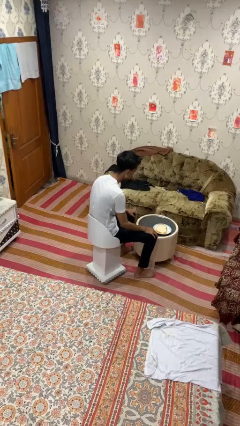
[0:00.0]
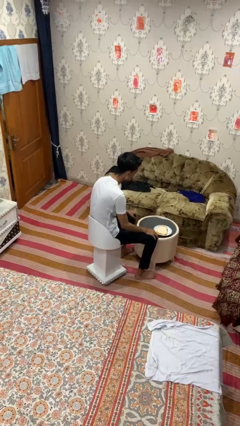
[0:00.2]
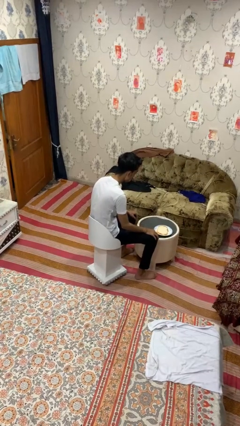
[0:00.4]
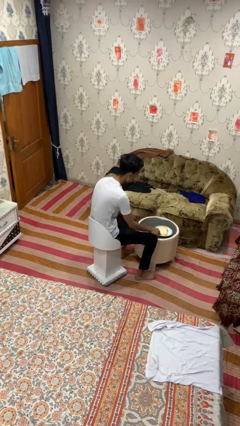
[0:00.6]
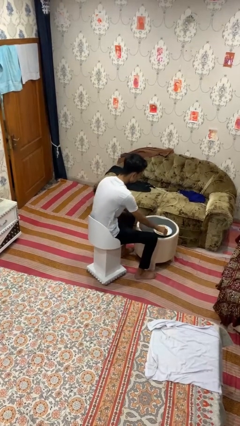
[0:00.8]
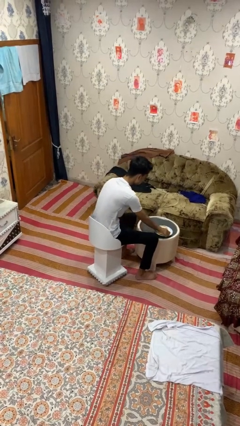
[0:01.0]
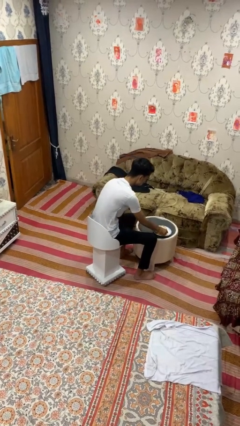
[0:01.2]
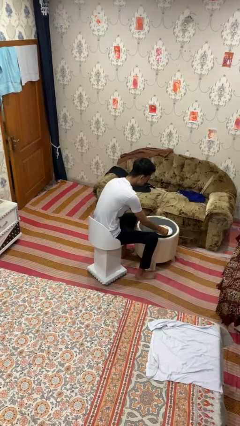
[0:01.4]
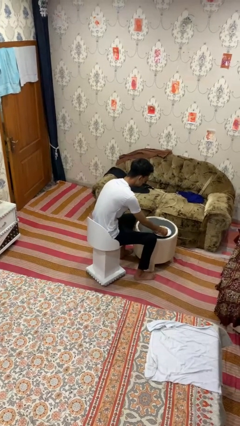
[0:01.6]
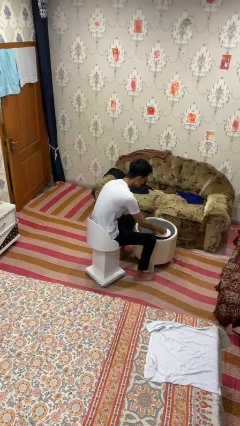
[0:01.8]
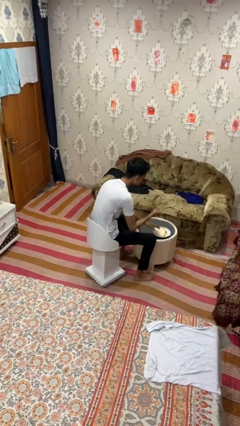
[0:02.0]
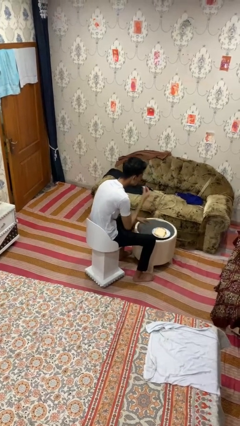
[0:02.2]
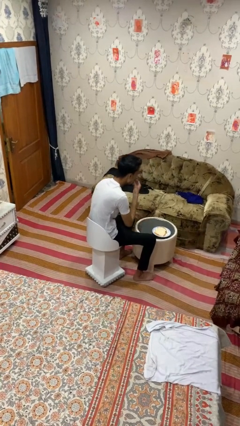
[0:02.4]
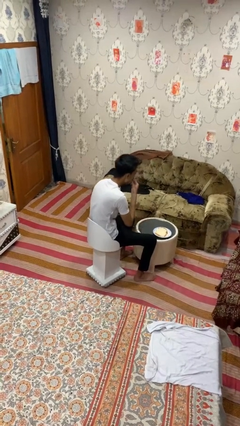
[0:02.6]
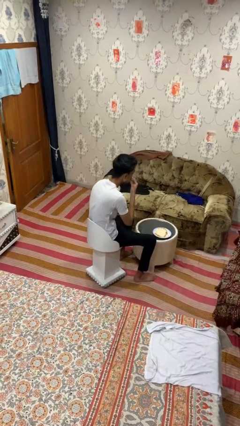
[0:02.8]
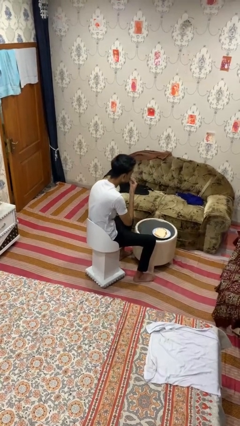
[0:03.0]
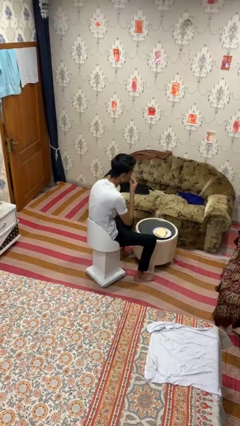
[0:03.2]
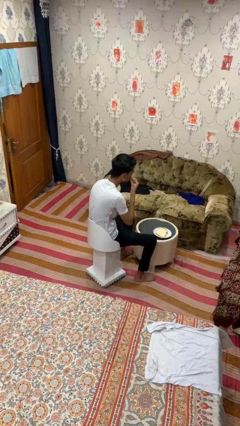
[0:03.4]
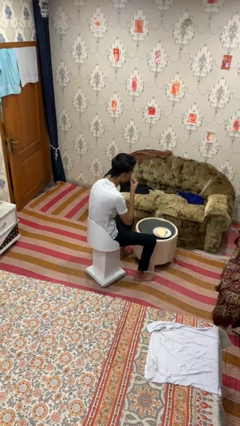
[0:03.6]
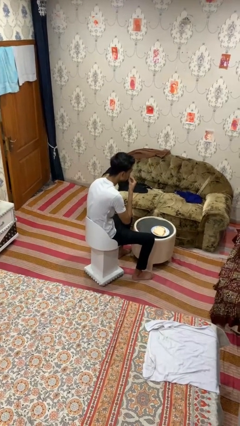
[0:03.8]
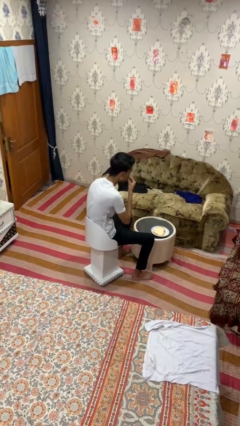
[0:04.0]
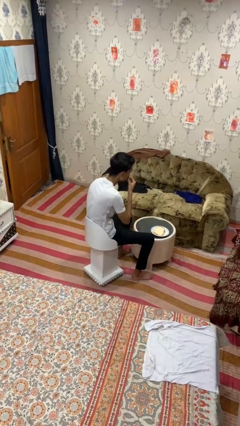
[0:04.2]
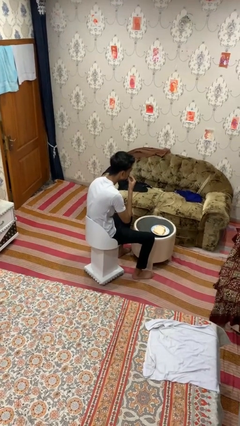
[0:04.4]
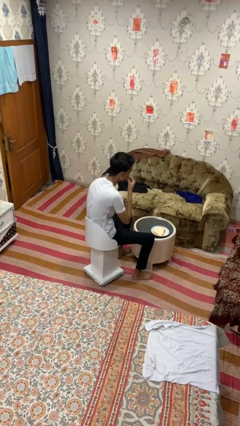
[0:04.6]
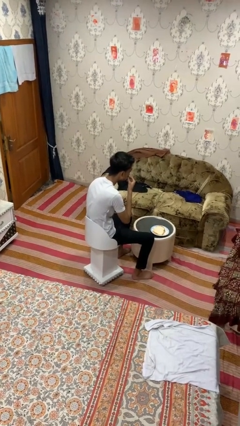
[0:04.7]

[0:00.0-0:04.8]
person eats with hands

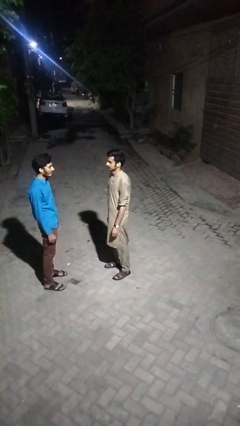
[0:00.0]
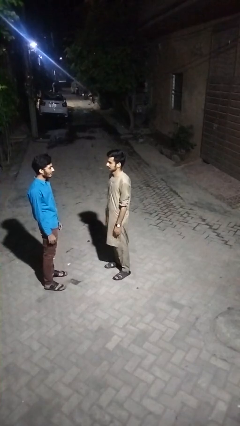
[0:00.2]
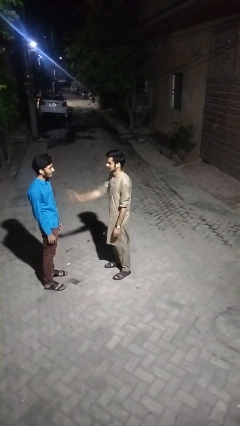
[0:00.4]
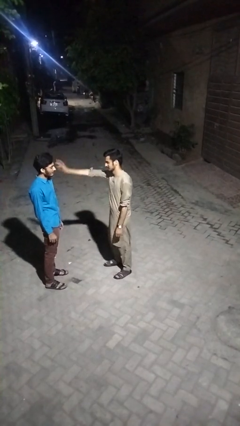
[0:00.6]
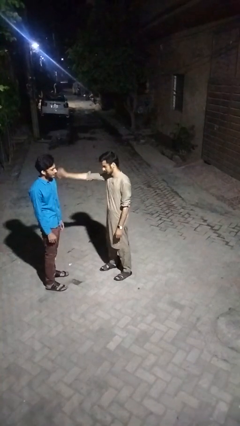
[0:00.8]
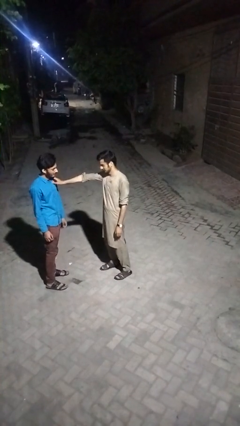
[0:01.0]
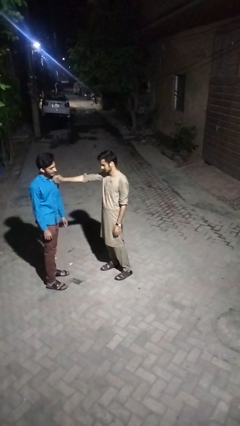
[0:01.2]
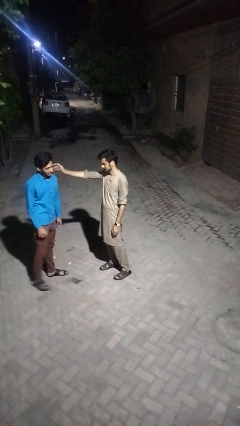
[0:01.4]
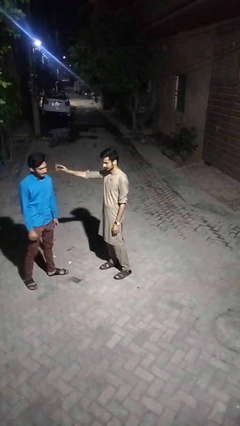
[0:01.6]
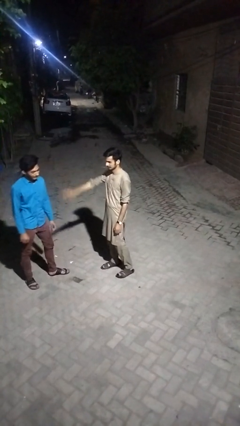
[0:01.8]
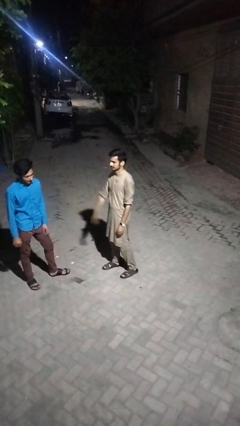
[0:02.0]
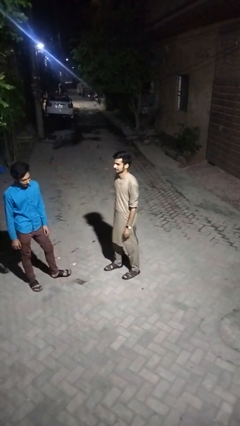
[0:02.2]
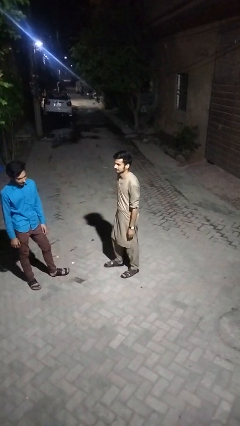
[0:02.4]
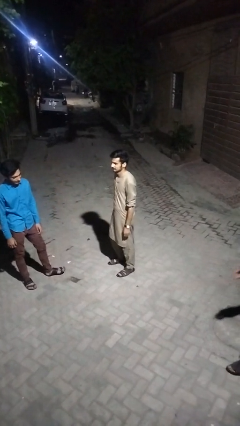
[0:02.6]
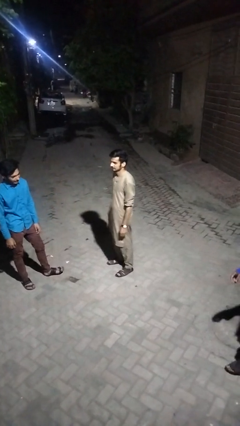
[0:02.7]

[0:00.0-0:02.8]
person shoves person

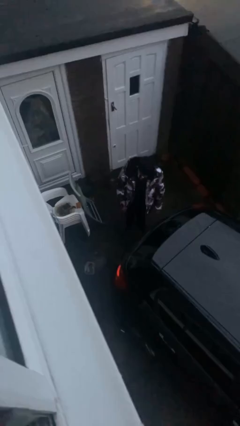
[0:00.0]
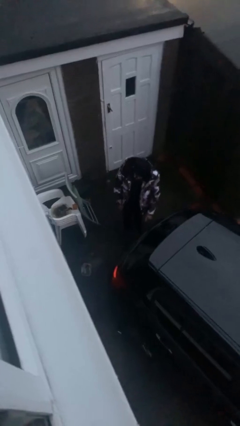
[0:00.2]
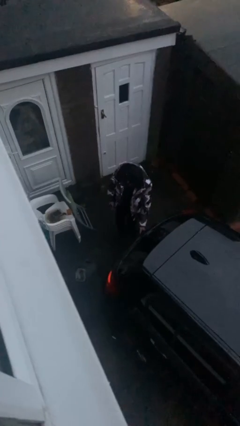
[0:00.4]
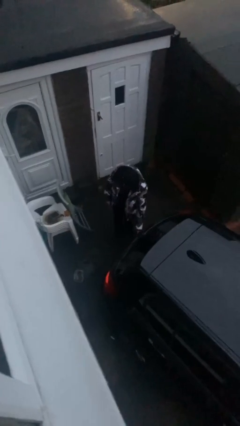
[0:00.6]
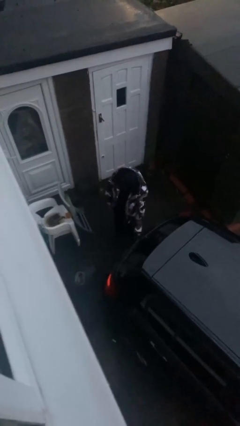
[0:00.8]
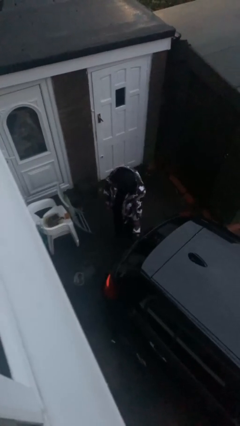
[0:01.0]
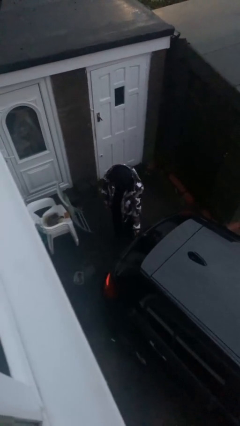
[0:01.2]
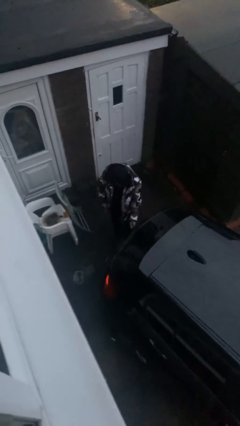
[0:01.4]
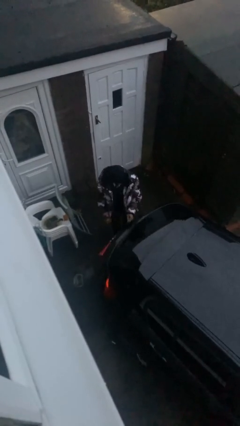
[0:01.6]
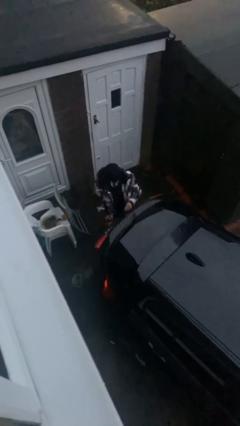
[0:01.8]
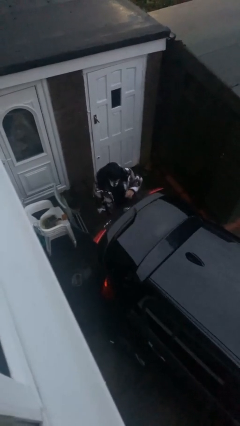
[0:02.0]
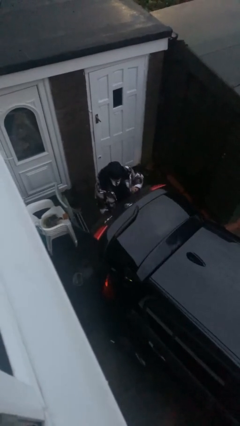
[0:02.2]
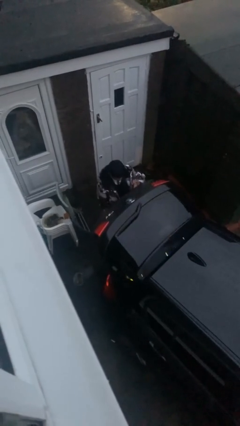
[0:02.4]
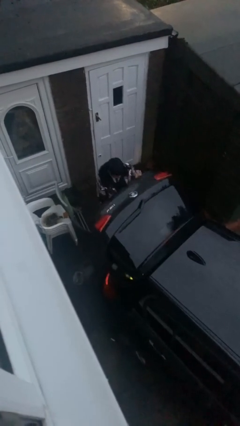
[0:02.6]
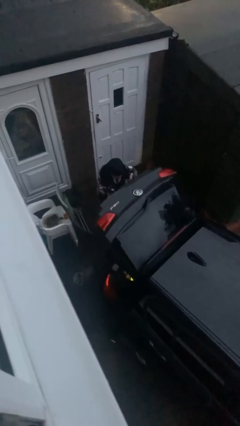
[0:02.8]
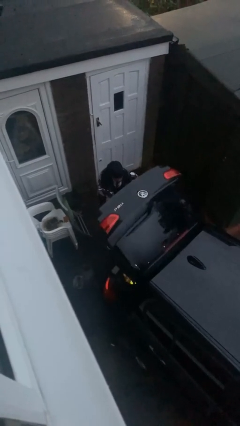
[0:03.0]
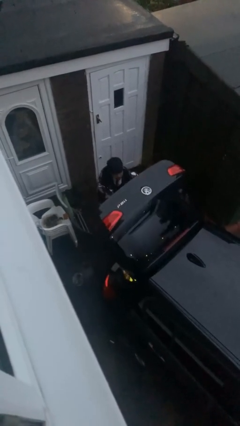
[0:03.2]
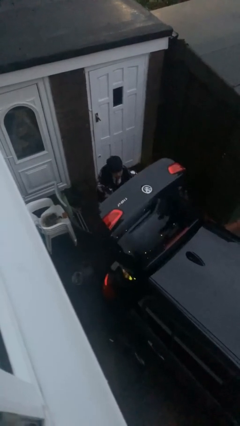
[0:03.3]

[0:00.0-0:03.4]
person opens car trunk

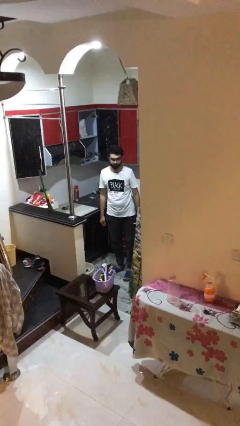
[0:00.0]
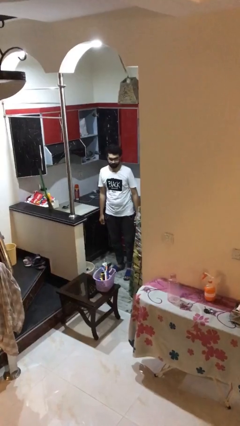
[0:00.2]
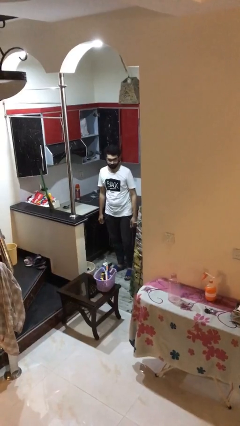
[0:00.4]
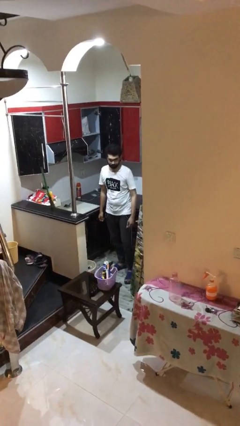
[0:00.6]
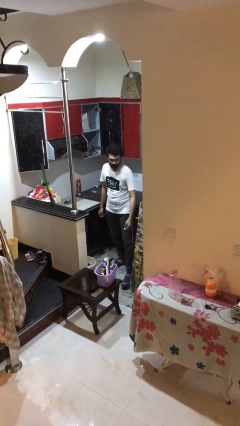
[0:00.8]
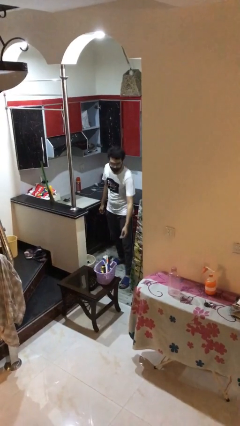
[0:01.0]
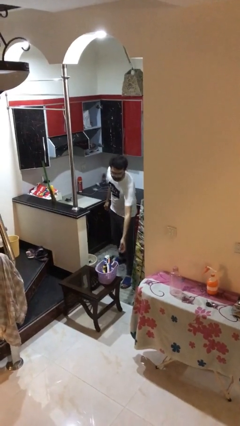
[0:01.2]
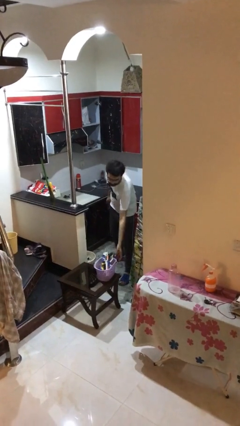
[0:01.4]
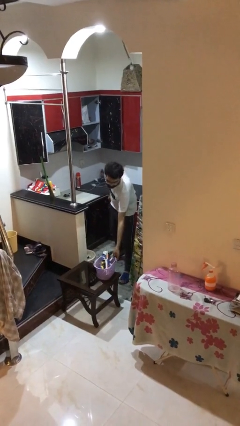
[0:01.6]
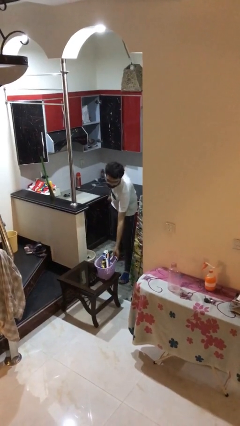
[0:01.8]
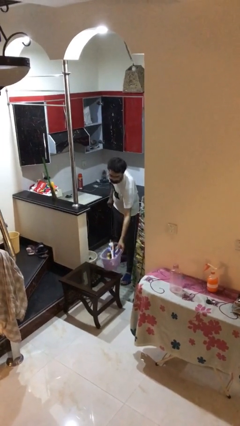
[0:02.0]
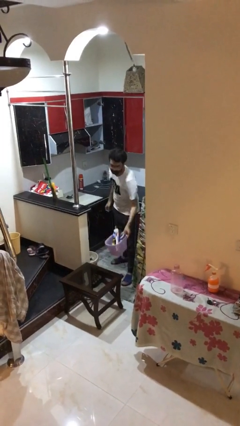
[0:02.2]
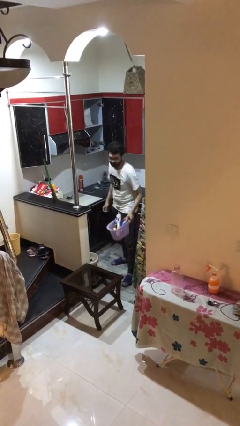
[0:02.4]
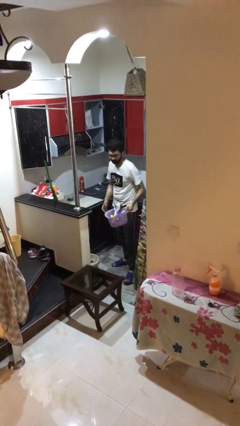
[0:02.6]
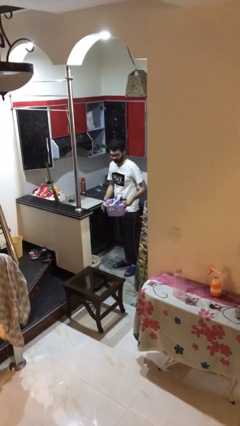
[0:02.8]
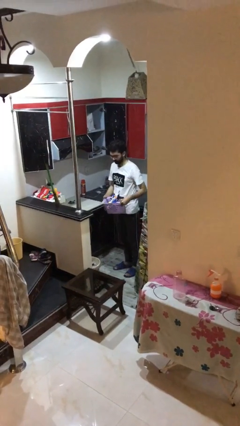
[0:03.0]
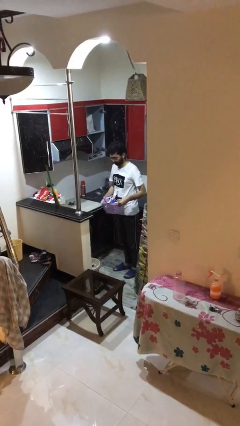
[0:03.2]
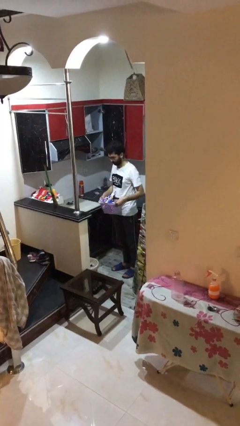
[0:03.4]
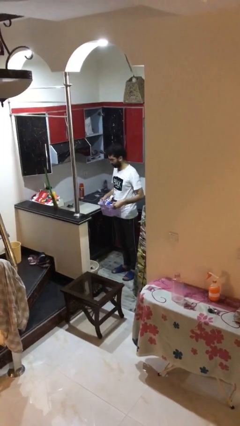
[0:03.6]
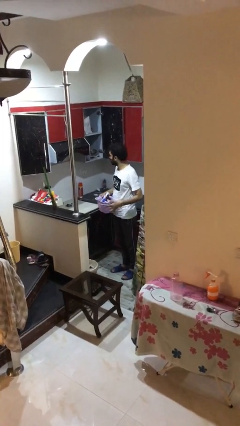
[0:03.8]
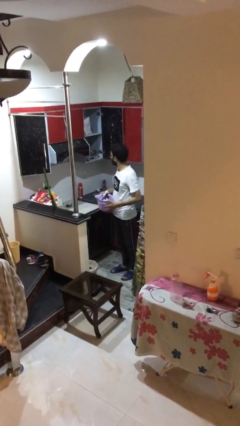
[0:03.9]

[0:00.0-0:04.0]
person picks up object from table

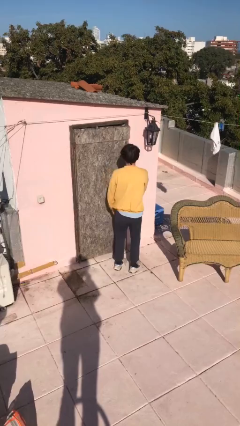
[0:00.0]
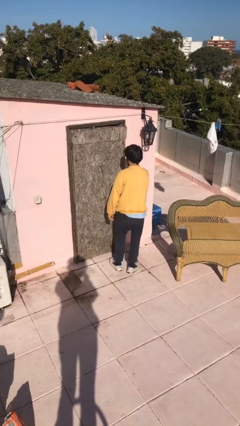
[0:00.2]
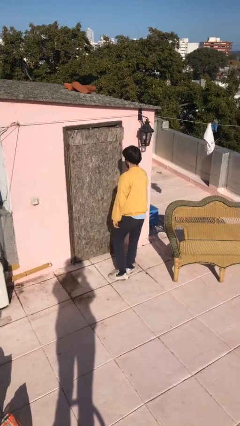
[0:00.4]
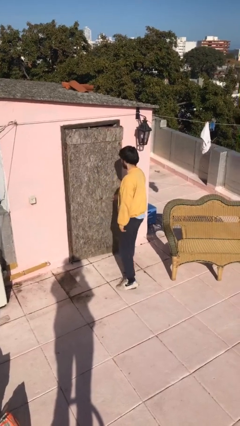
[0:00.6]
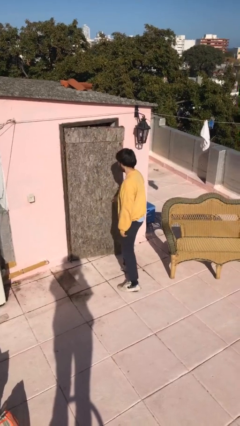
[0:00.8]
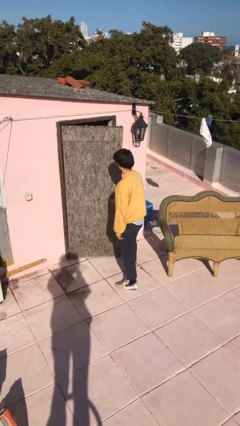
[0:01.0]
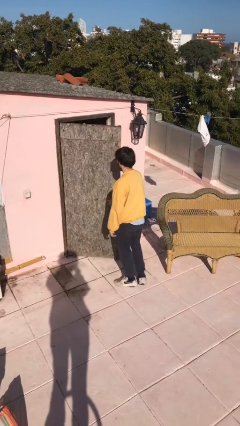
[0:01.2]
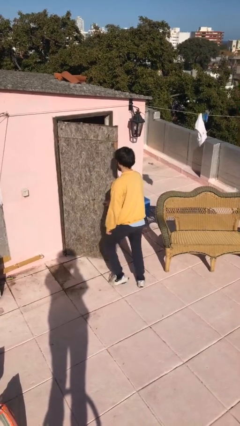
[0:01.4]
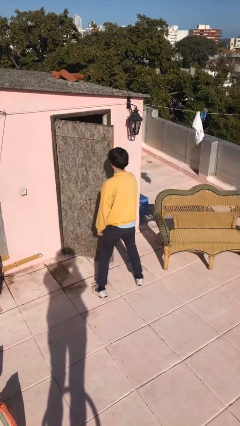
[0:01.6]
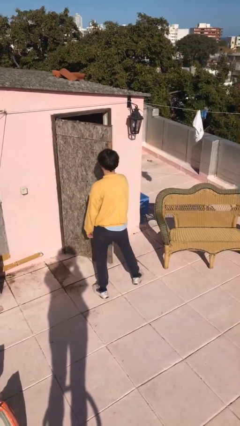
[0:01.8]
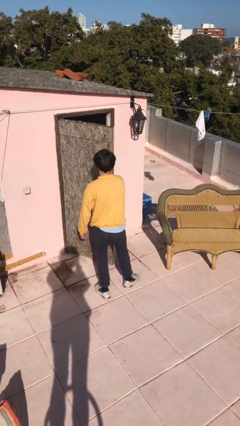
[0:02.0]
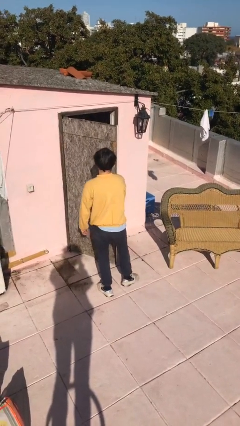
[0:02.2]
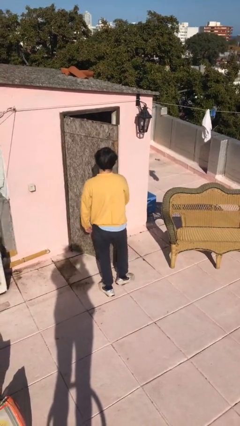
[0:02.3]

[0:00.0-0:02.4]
person opens facility door

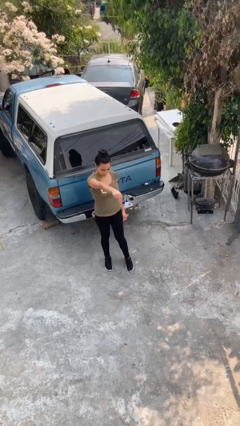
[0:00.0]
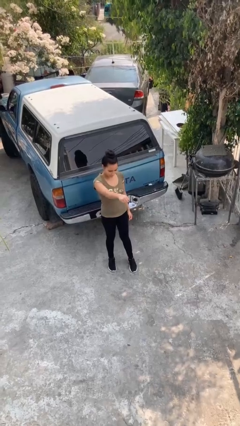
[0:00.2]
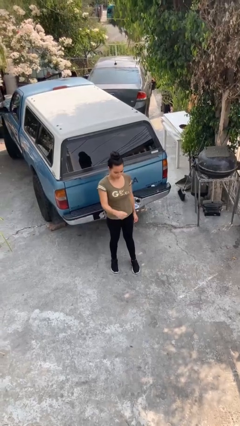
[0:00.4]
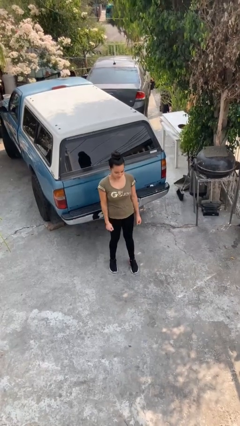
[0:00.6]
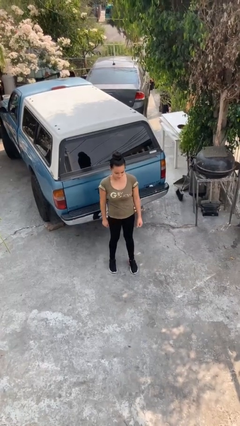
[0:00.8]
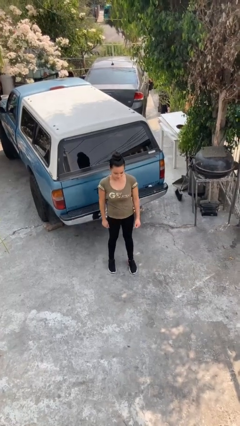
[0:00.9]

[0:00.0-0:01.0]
person karate chop
